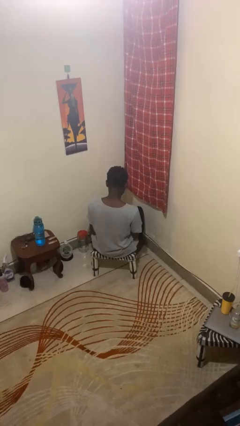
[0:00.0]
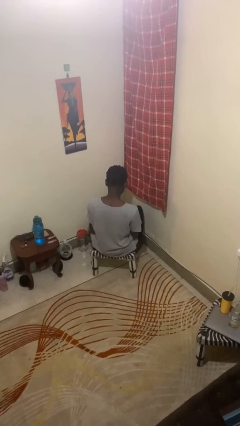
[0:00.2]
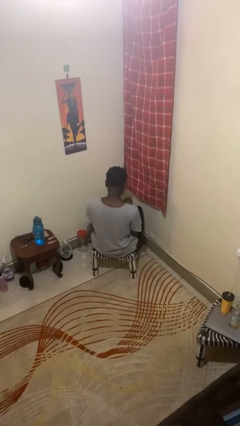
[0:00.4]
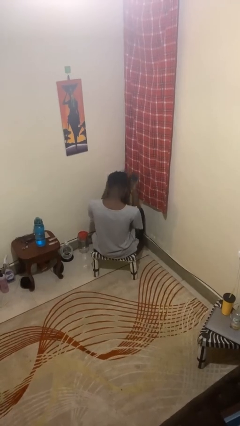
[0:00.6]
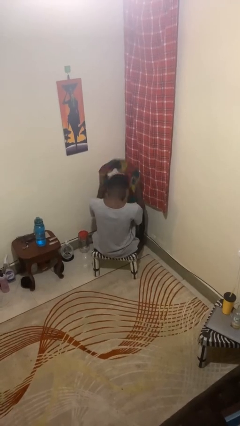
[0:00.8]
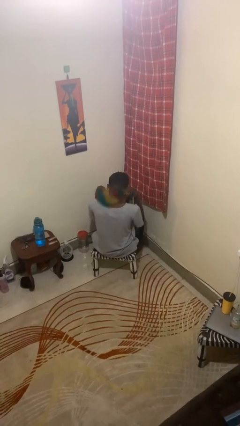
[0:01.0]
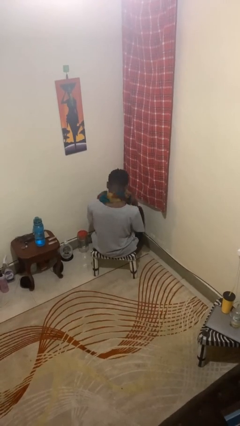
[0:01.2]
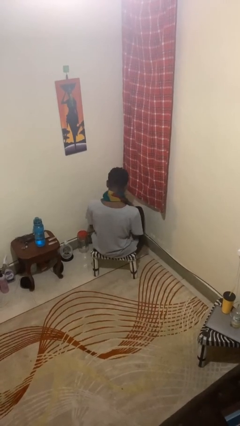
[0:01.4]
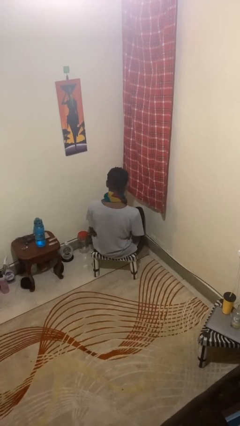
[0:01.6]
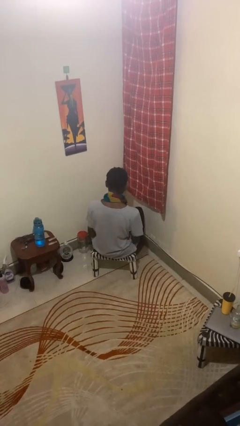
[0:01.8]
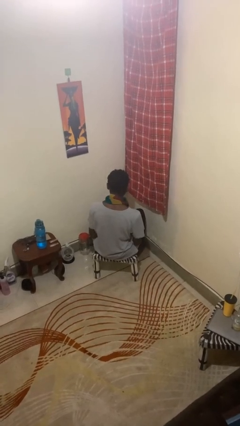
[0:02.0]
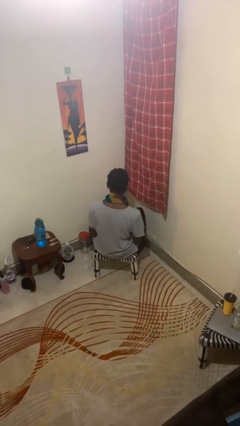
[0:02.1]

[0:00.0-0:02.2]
person puts on scarf

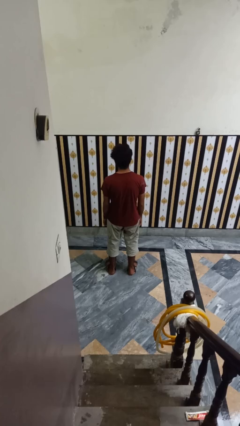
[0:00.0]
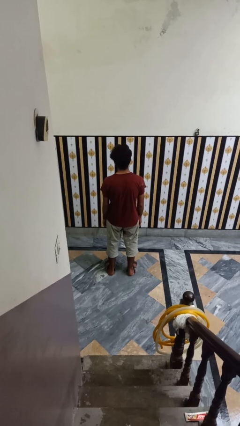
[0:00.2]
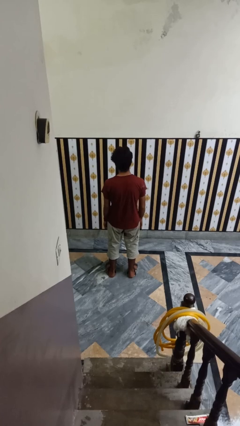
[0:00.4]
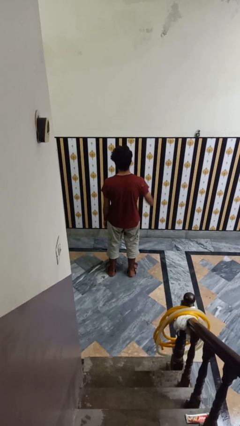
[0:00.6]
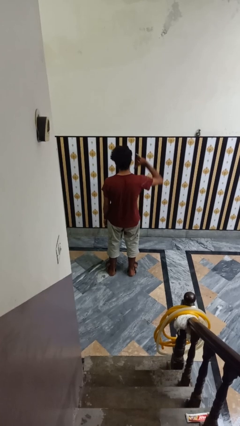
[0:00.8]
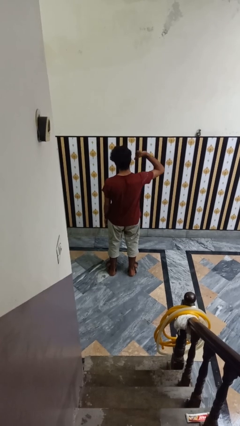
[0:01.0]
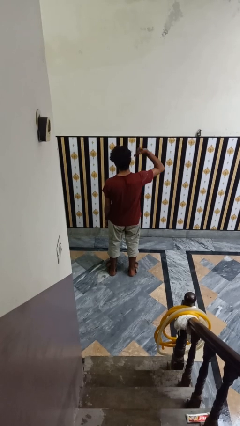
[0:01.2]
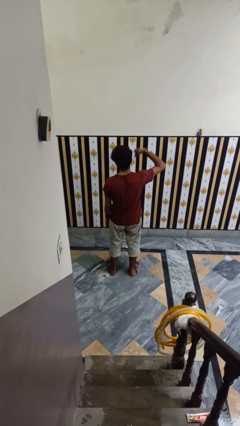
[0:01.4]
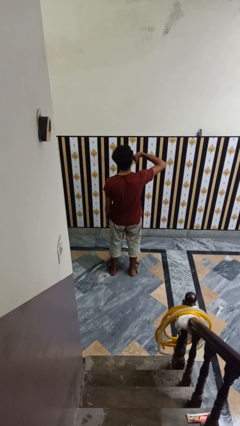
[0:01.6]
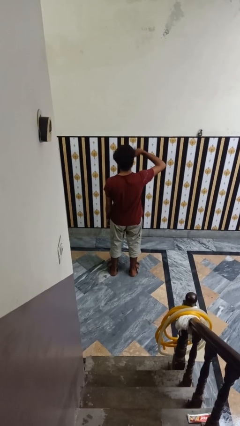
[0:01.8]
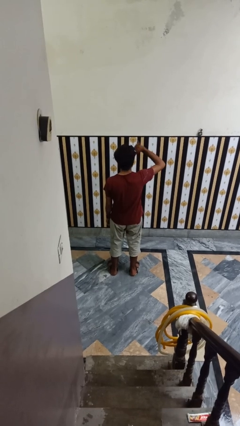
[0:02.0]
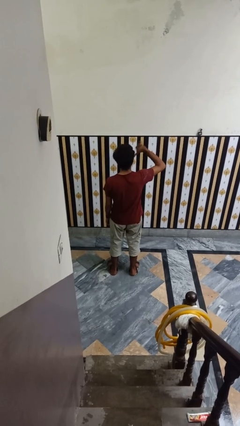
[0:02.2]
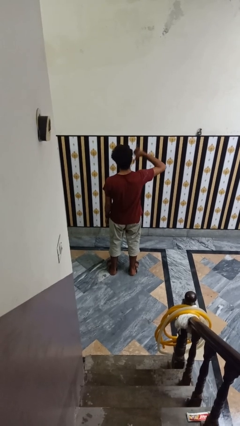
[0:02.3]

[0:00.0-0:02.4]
person gestures hang loose

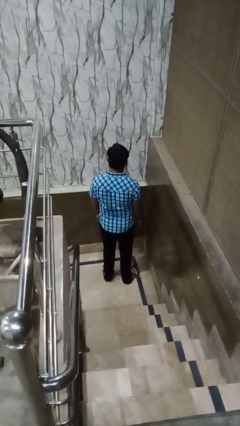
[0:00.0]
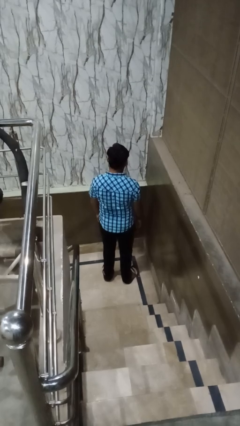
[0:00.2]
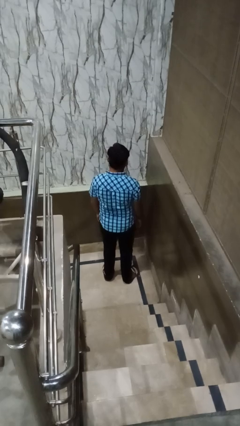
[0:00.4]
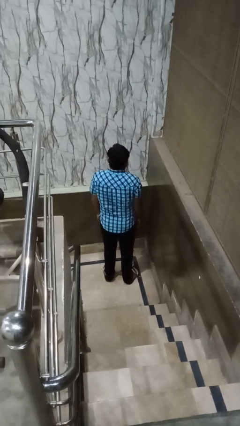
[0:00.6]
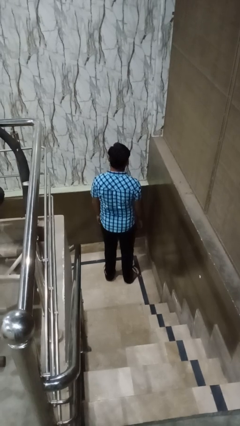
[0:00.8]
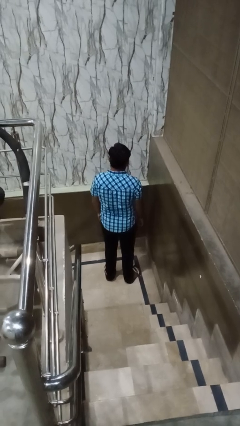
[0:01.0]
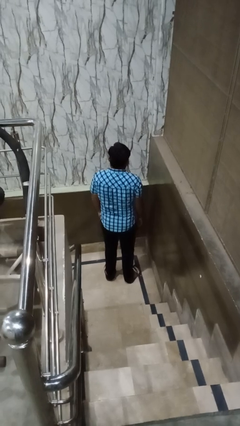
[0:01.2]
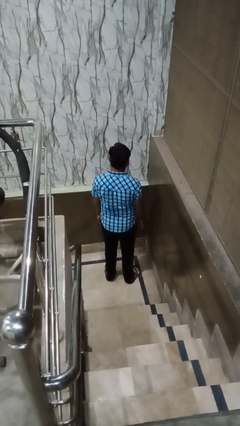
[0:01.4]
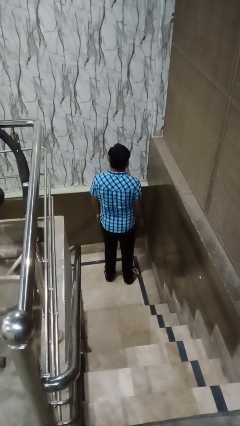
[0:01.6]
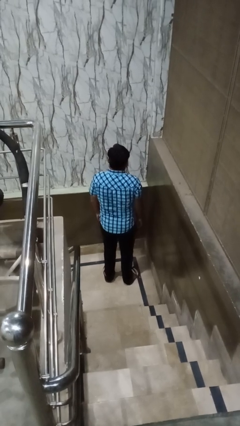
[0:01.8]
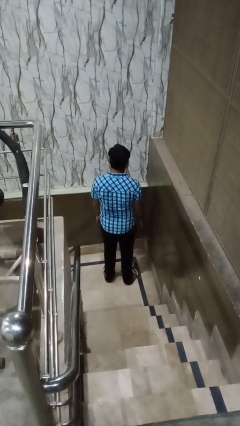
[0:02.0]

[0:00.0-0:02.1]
person shrugs

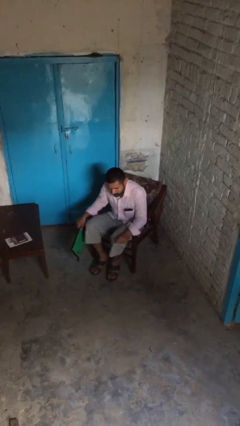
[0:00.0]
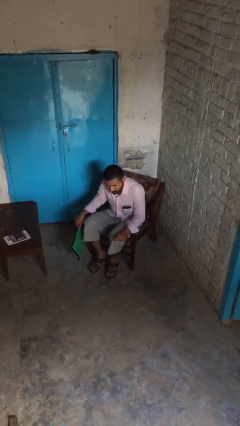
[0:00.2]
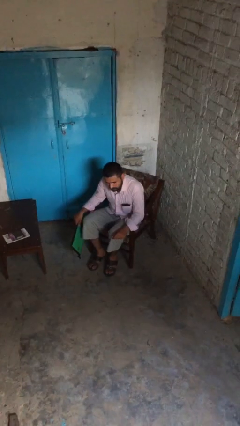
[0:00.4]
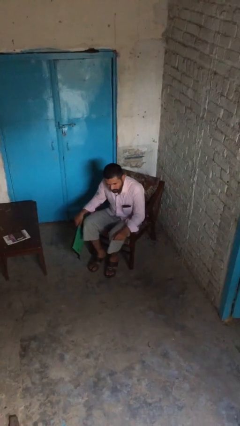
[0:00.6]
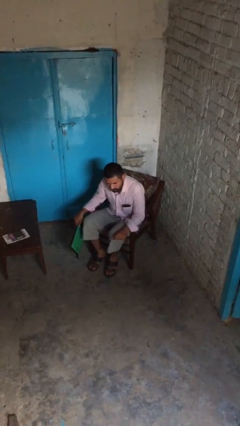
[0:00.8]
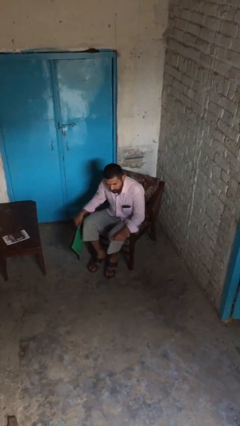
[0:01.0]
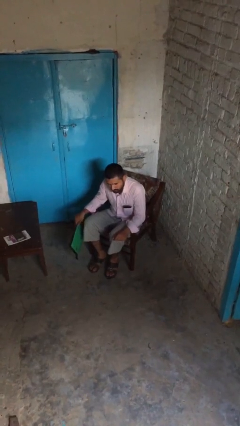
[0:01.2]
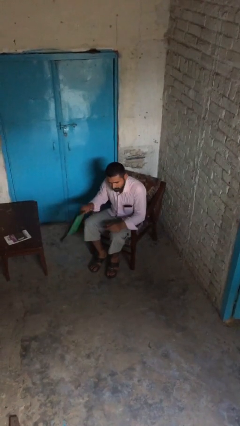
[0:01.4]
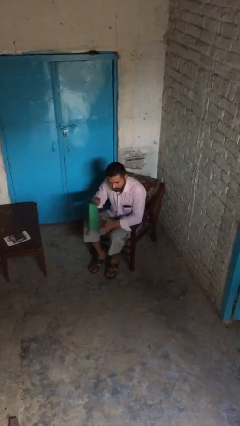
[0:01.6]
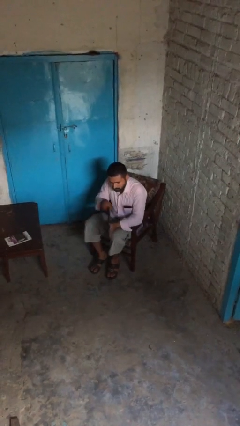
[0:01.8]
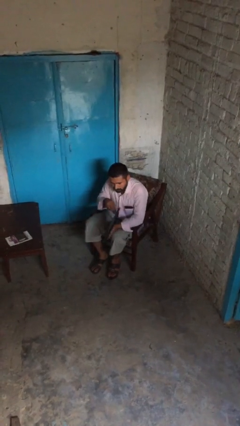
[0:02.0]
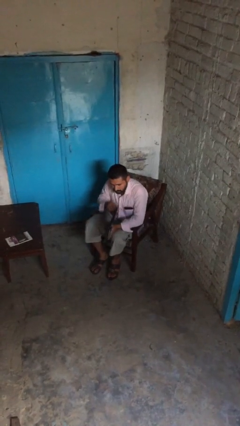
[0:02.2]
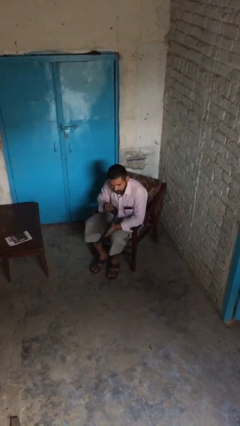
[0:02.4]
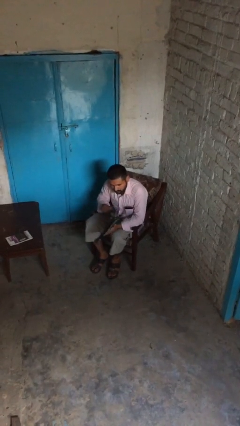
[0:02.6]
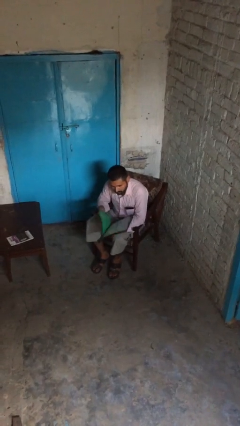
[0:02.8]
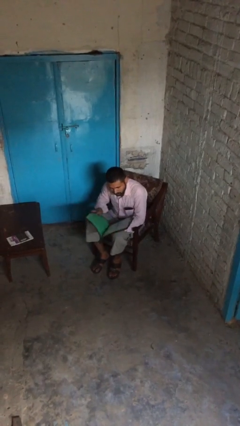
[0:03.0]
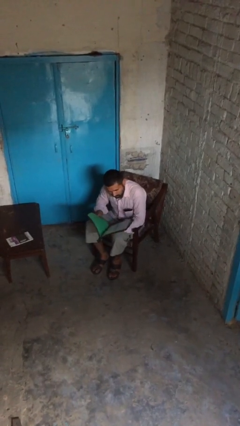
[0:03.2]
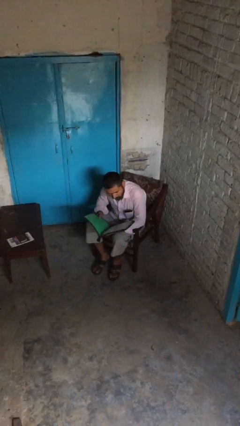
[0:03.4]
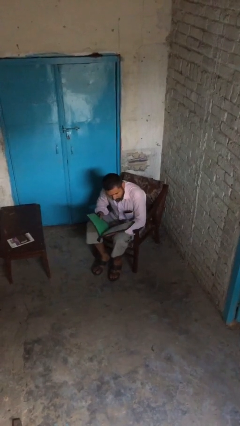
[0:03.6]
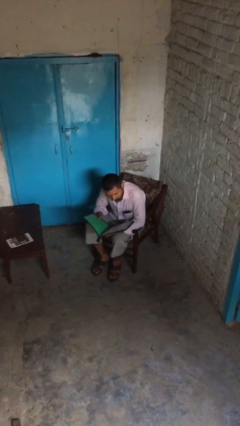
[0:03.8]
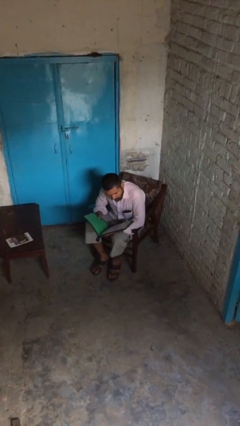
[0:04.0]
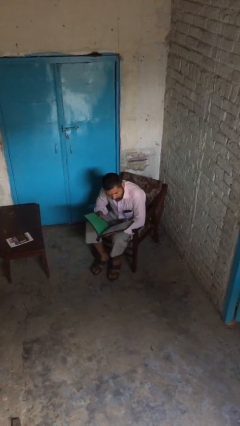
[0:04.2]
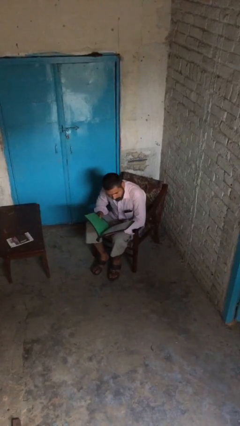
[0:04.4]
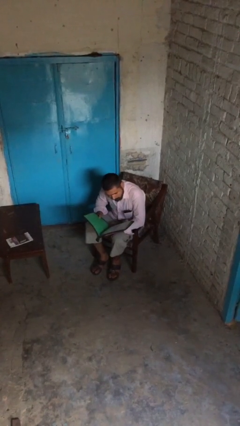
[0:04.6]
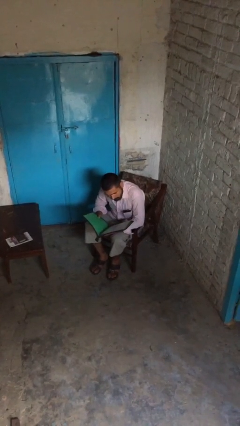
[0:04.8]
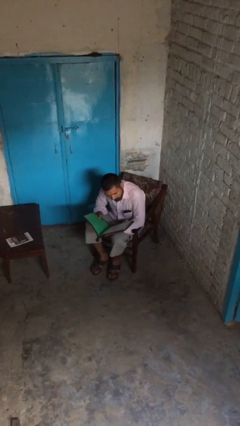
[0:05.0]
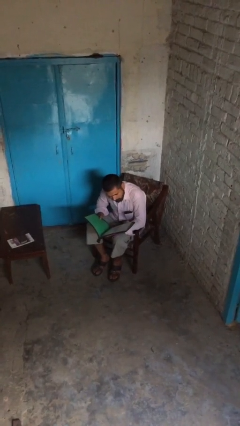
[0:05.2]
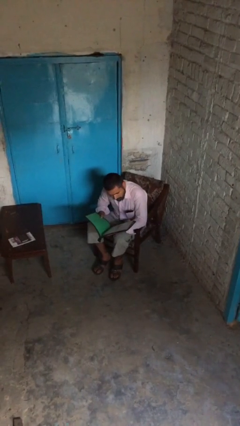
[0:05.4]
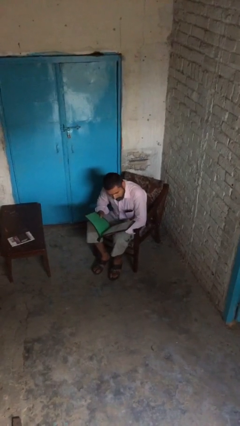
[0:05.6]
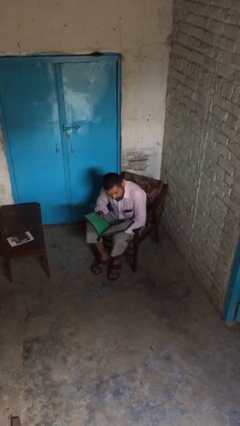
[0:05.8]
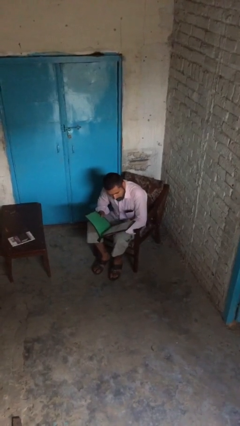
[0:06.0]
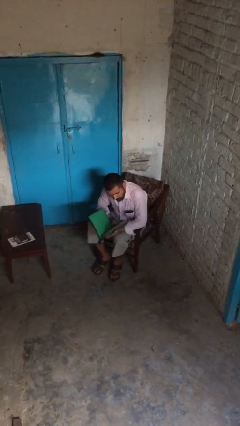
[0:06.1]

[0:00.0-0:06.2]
person reads document

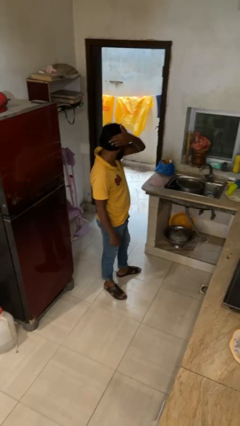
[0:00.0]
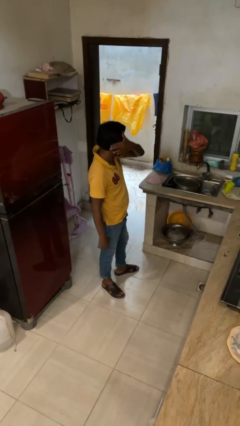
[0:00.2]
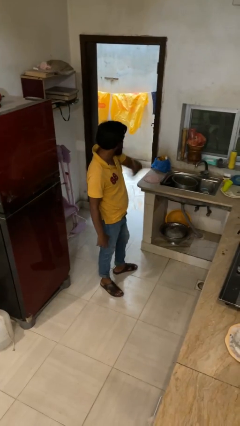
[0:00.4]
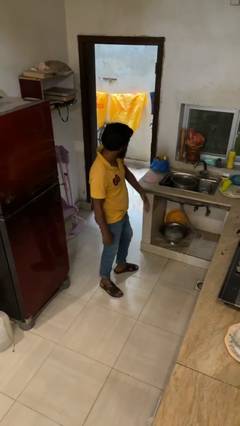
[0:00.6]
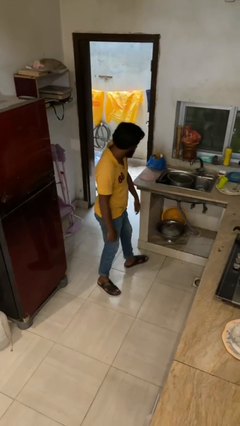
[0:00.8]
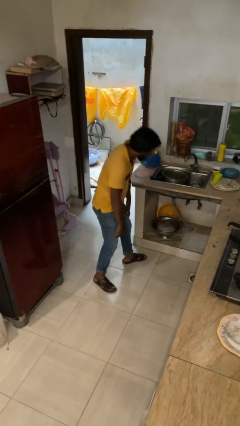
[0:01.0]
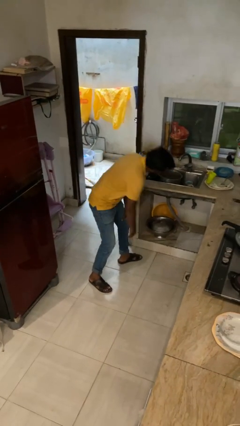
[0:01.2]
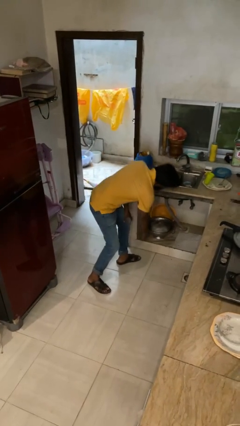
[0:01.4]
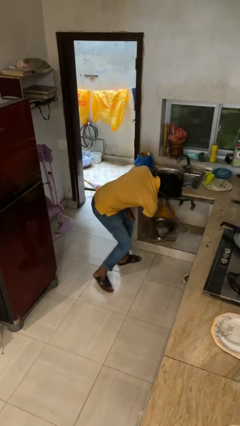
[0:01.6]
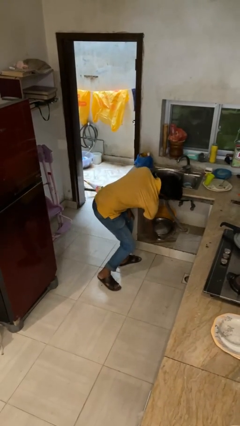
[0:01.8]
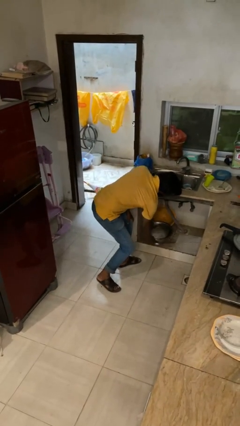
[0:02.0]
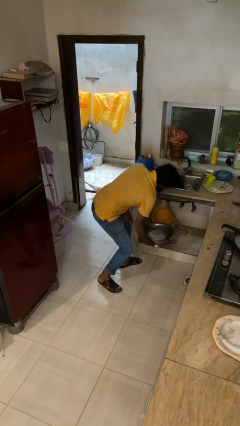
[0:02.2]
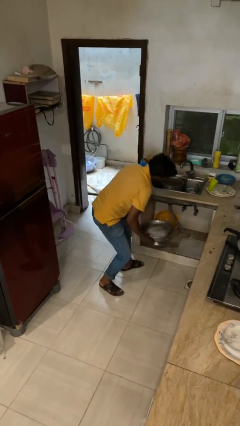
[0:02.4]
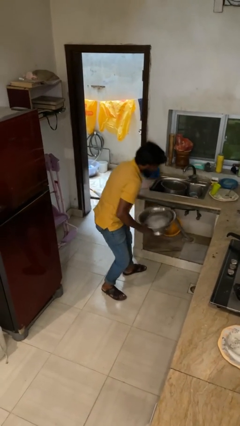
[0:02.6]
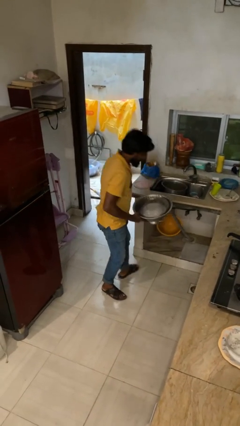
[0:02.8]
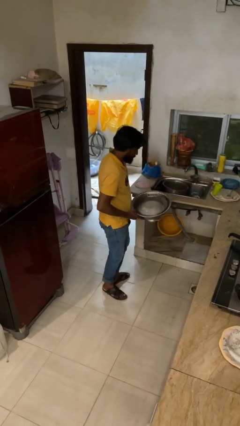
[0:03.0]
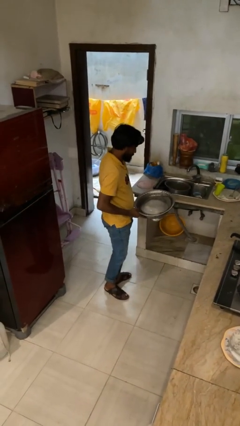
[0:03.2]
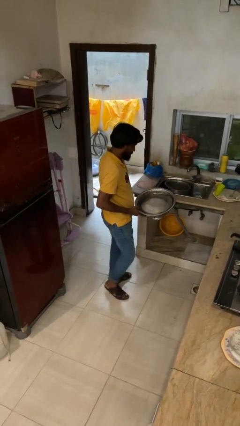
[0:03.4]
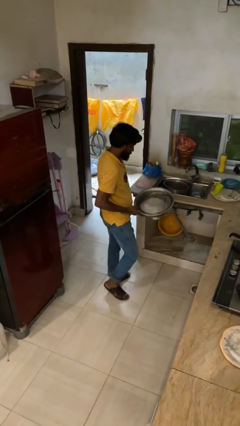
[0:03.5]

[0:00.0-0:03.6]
person picks up object from cabinet

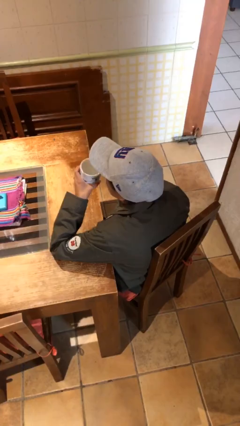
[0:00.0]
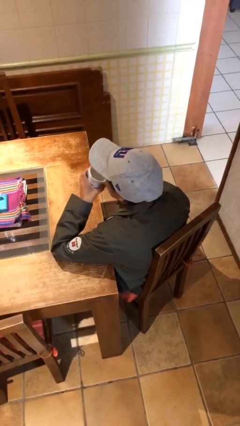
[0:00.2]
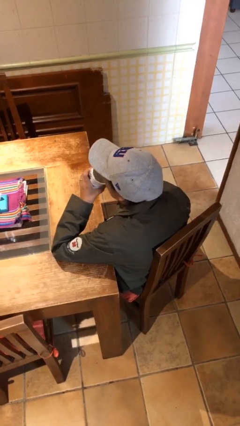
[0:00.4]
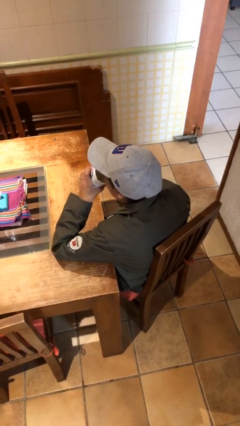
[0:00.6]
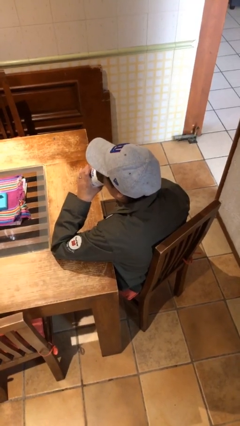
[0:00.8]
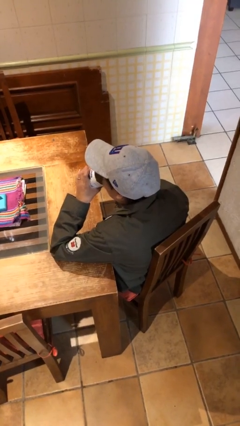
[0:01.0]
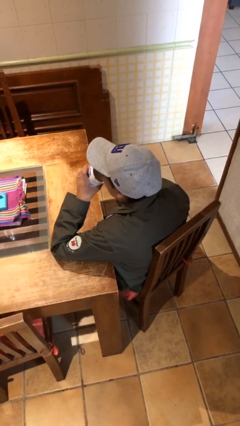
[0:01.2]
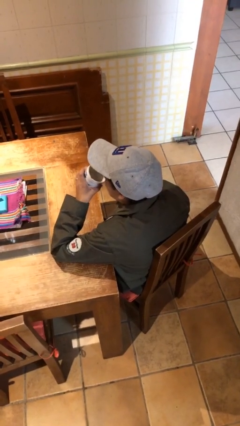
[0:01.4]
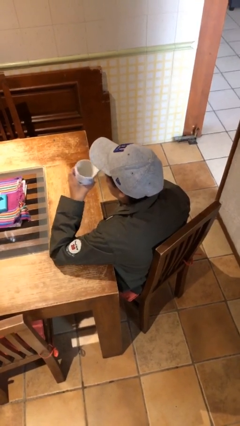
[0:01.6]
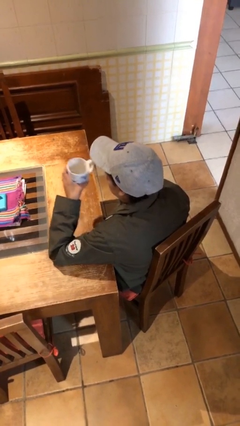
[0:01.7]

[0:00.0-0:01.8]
person drinks from mug
